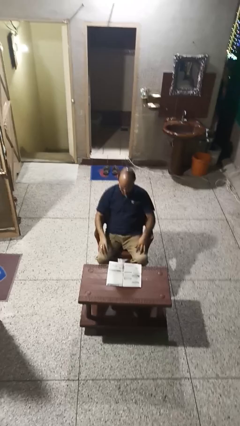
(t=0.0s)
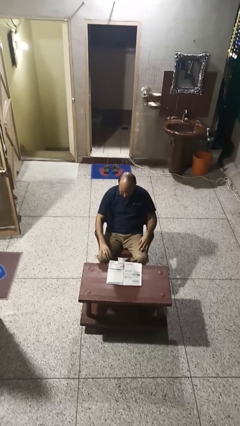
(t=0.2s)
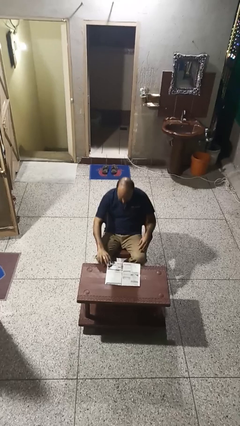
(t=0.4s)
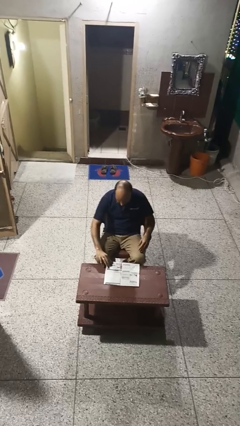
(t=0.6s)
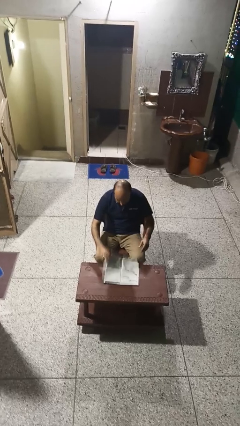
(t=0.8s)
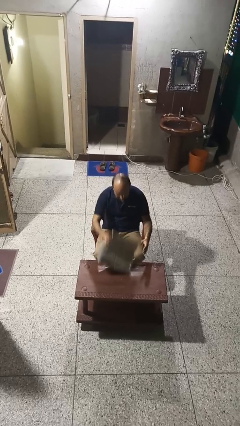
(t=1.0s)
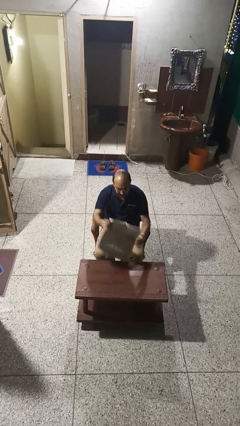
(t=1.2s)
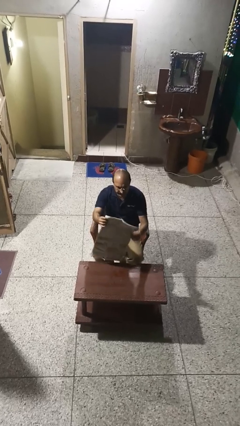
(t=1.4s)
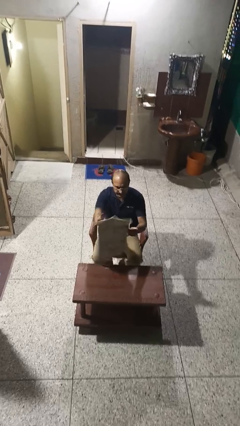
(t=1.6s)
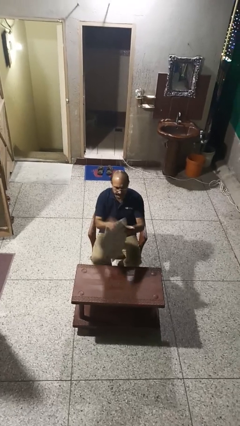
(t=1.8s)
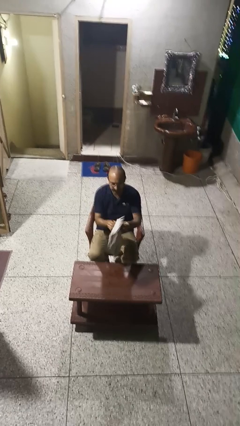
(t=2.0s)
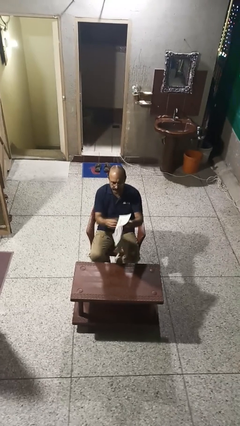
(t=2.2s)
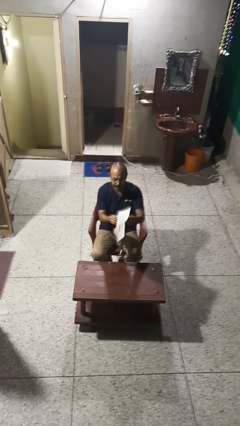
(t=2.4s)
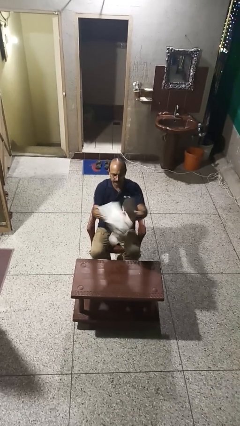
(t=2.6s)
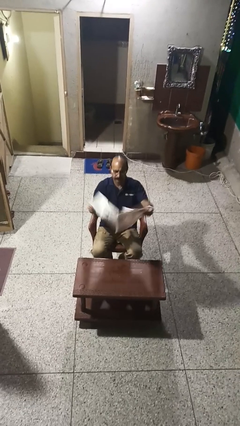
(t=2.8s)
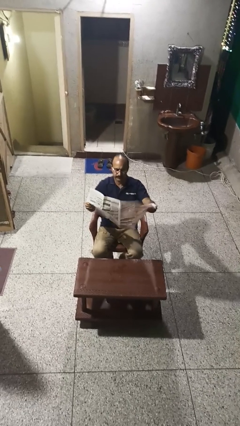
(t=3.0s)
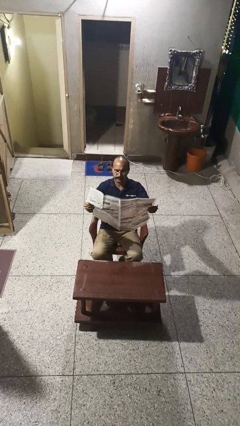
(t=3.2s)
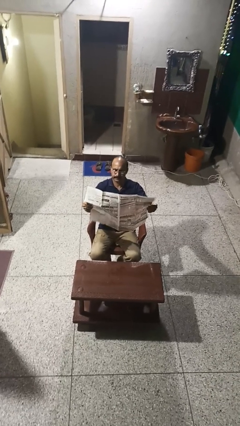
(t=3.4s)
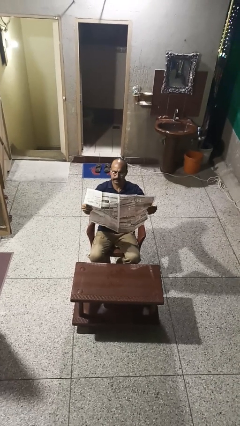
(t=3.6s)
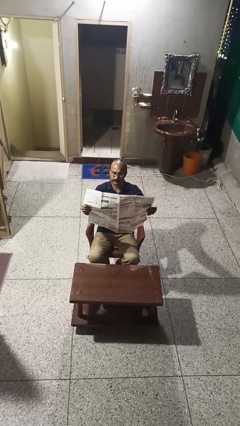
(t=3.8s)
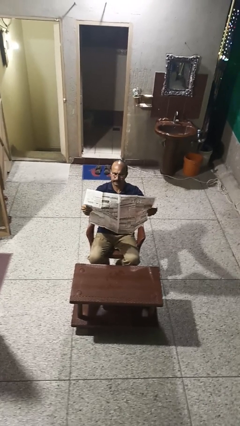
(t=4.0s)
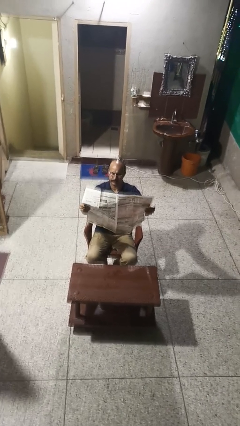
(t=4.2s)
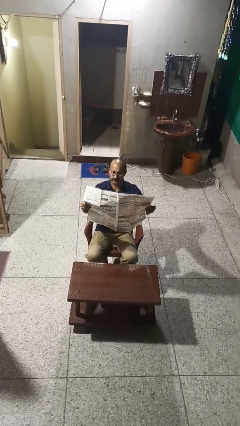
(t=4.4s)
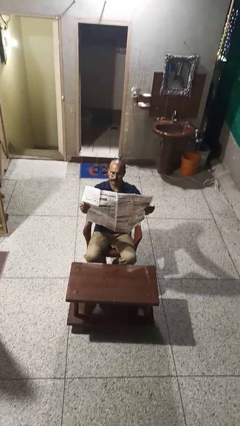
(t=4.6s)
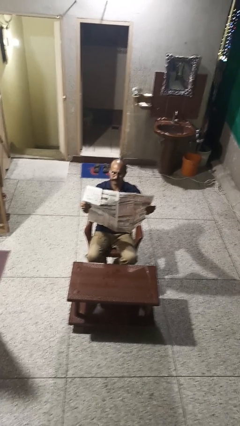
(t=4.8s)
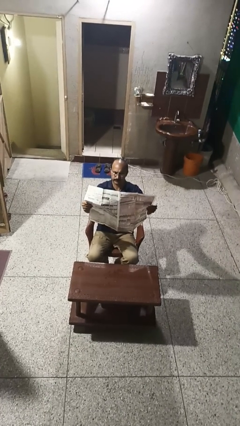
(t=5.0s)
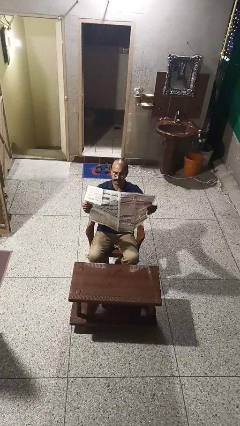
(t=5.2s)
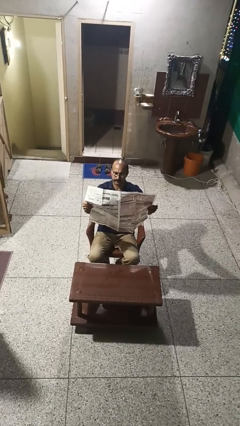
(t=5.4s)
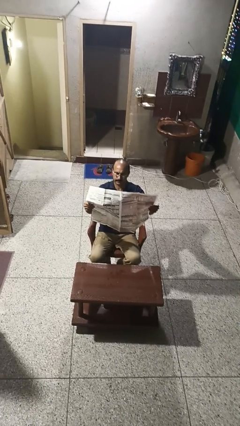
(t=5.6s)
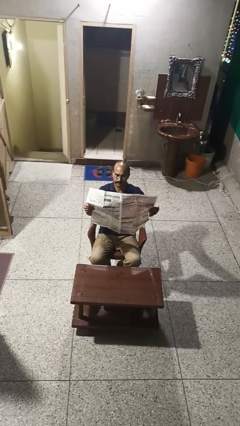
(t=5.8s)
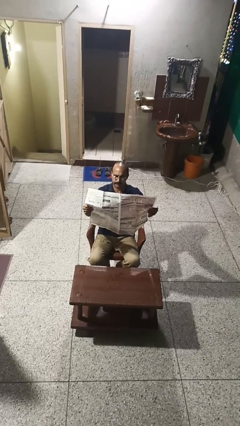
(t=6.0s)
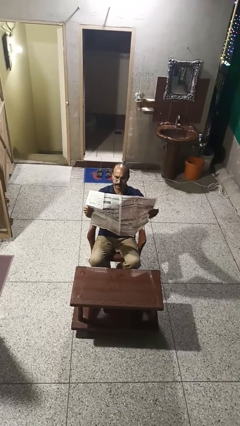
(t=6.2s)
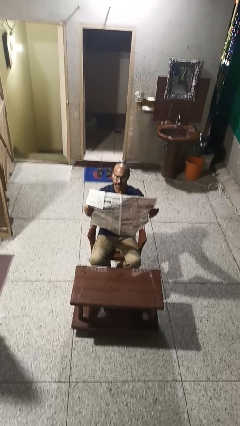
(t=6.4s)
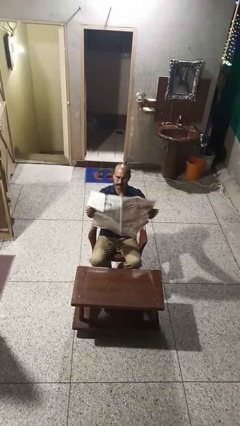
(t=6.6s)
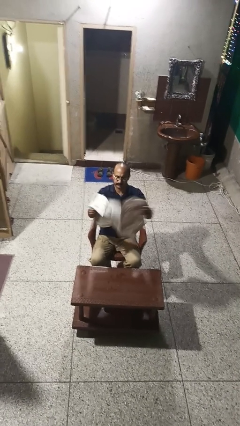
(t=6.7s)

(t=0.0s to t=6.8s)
person reads newspaper

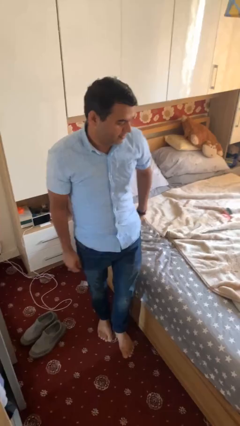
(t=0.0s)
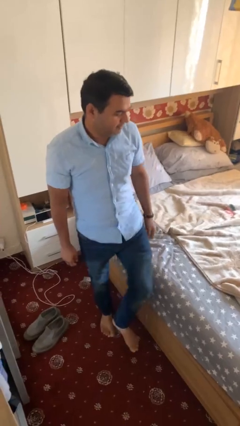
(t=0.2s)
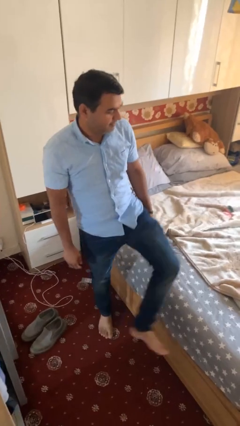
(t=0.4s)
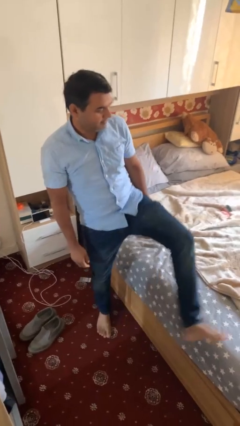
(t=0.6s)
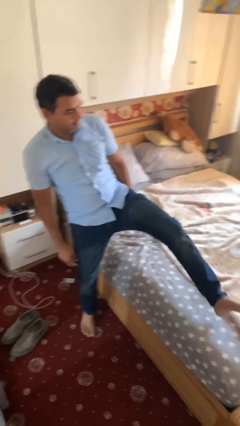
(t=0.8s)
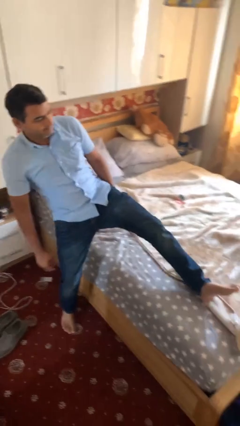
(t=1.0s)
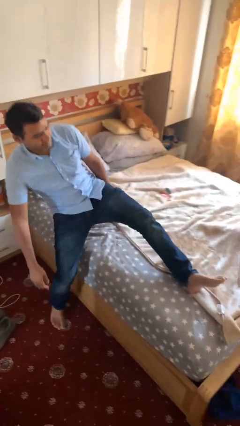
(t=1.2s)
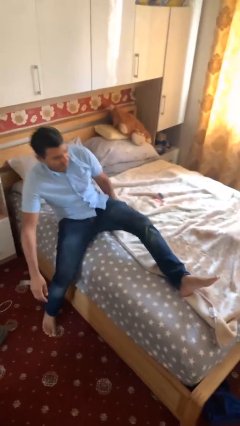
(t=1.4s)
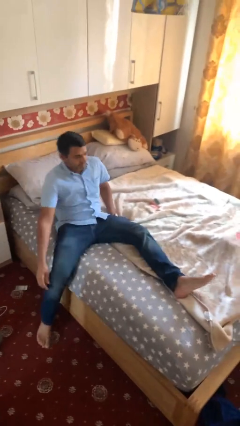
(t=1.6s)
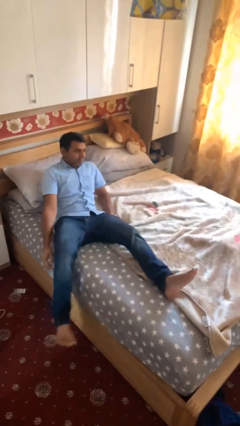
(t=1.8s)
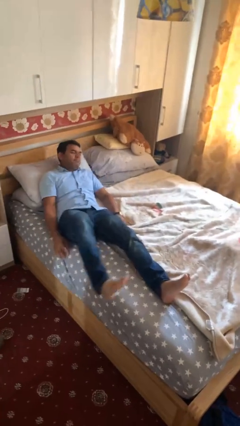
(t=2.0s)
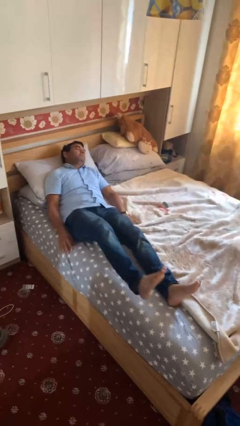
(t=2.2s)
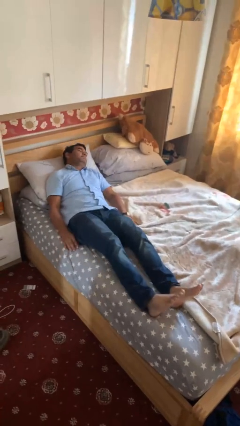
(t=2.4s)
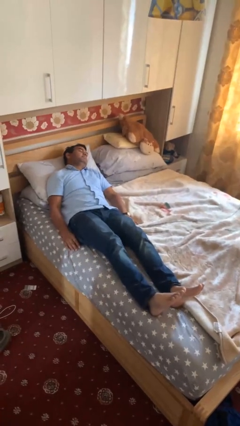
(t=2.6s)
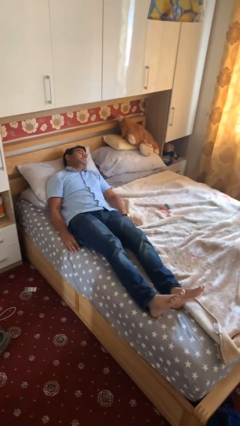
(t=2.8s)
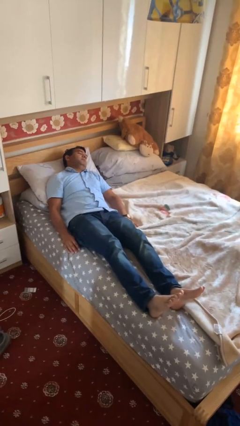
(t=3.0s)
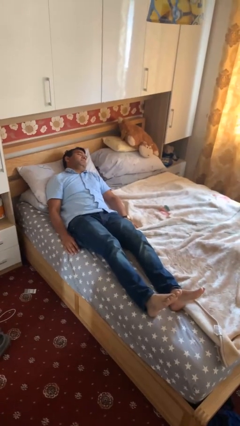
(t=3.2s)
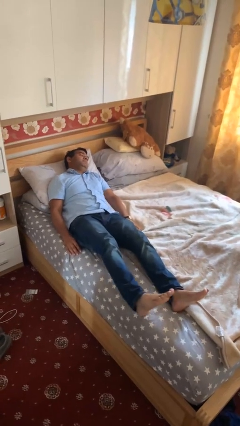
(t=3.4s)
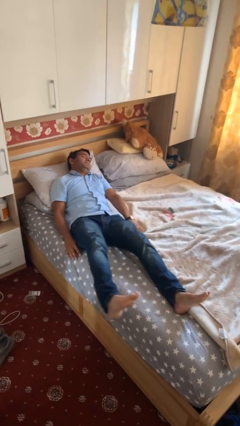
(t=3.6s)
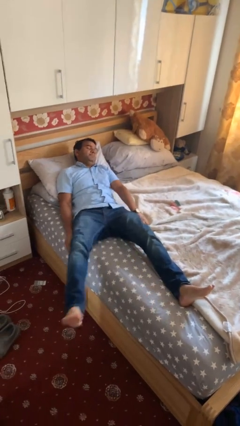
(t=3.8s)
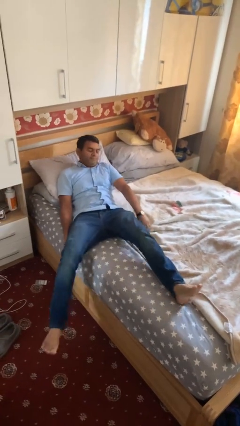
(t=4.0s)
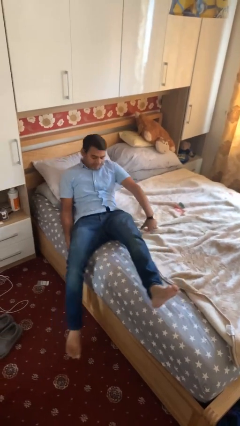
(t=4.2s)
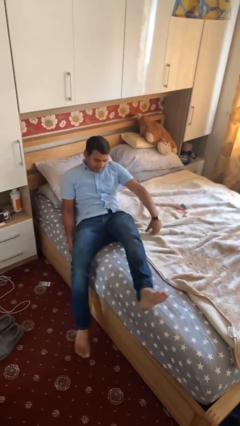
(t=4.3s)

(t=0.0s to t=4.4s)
person lies down on bed

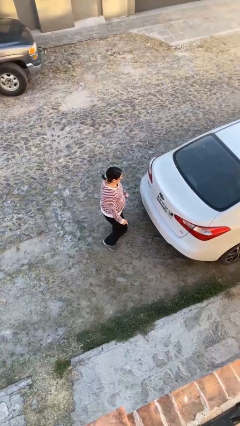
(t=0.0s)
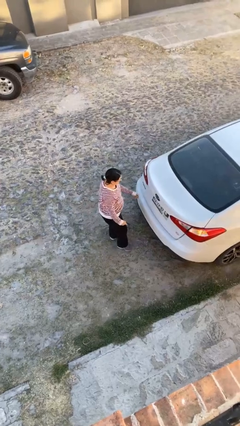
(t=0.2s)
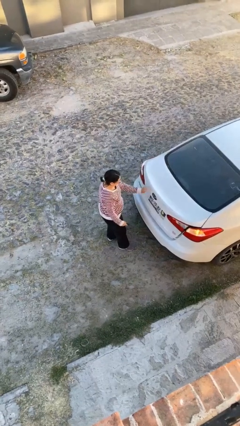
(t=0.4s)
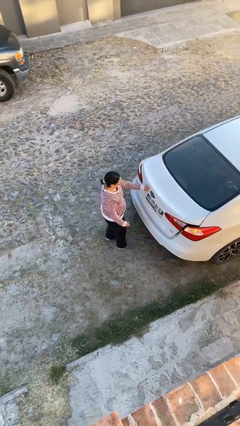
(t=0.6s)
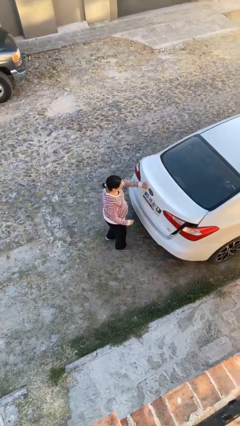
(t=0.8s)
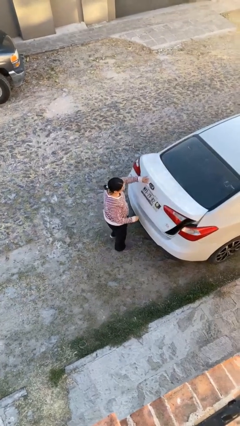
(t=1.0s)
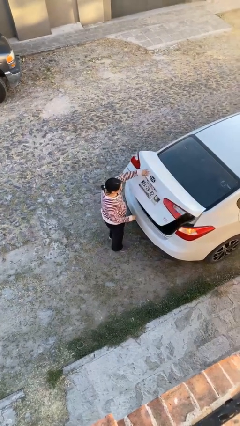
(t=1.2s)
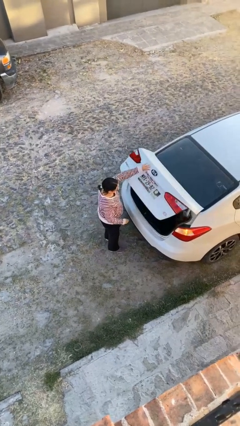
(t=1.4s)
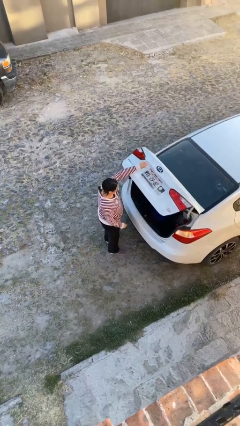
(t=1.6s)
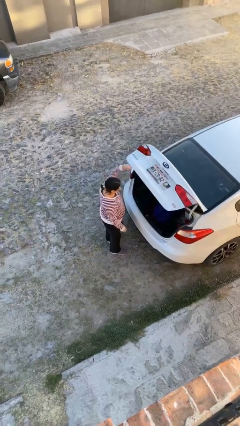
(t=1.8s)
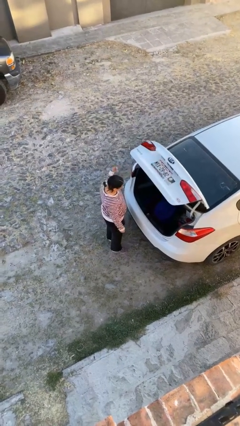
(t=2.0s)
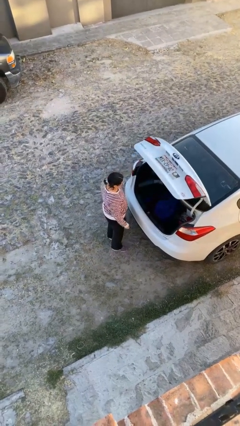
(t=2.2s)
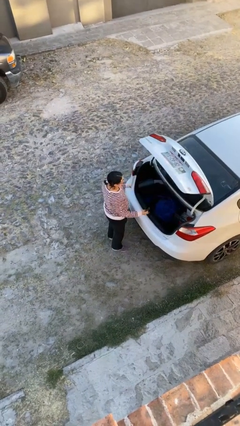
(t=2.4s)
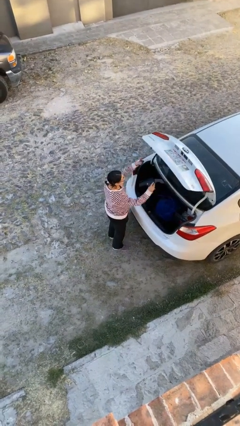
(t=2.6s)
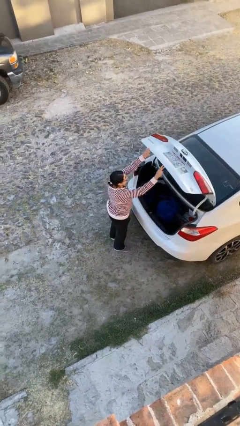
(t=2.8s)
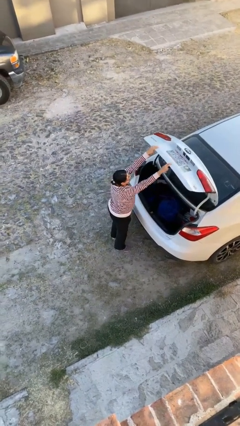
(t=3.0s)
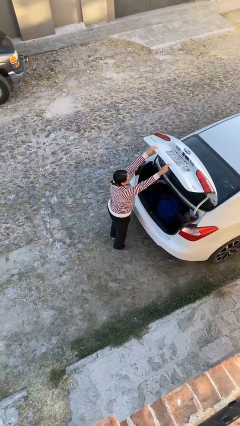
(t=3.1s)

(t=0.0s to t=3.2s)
person opens car trunk

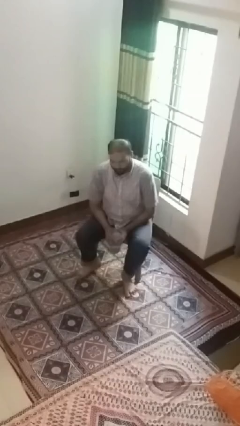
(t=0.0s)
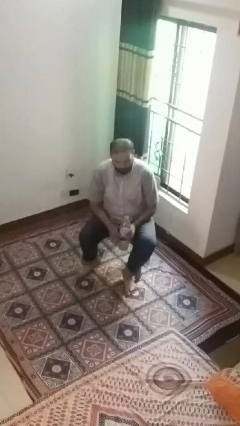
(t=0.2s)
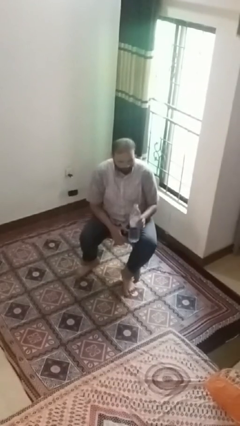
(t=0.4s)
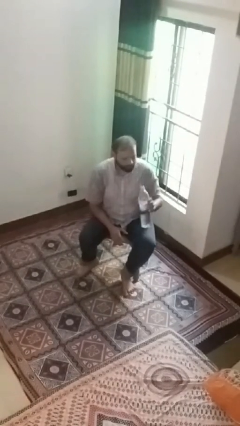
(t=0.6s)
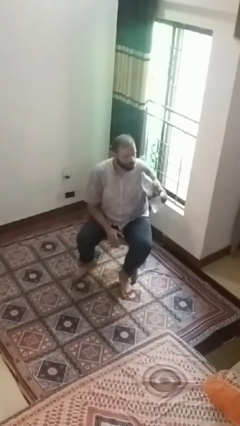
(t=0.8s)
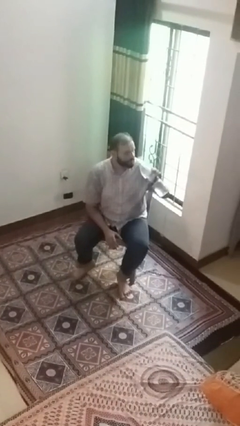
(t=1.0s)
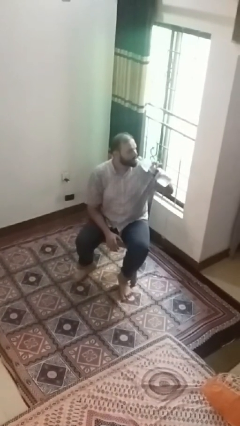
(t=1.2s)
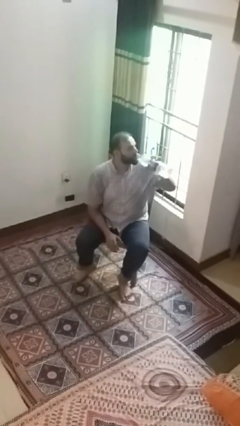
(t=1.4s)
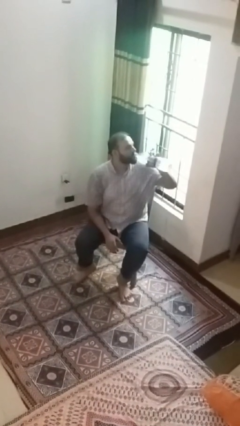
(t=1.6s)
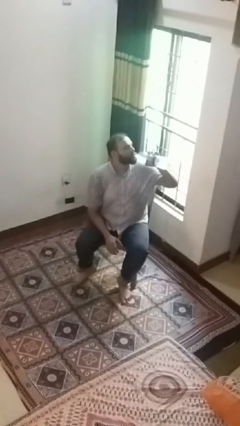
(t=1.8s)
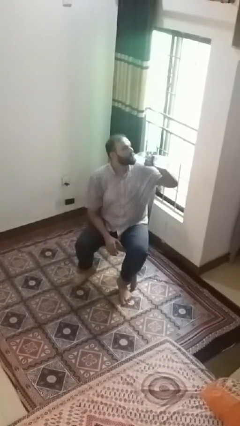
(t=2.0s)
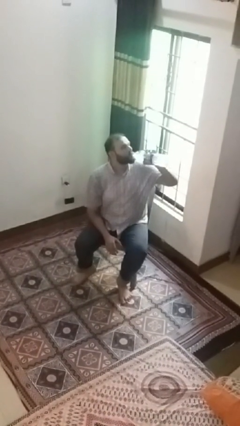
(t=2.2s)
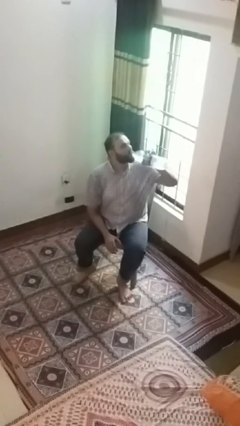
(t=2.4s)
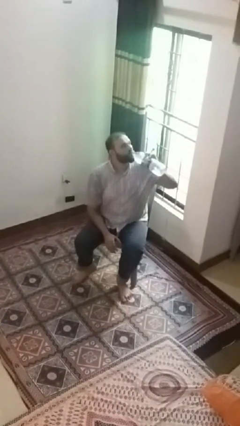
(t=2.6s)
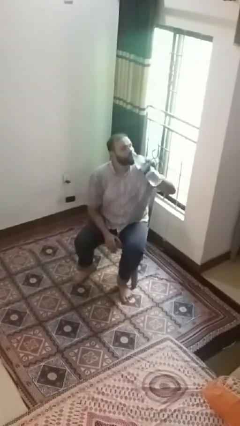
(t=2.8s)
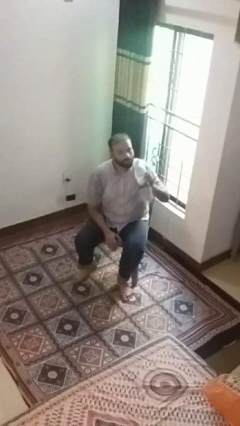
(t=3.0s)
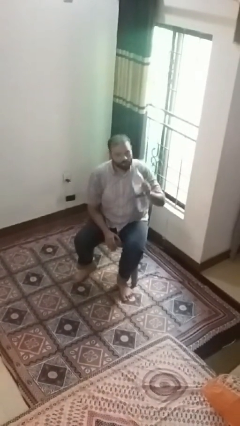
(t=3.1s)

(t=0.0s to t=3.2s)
person drinks from bottle
